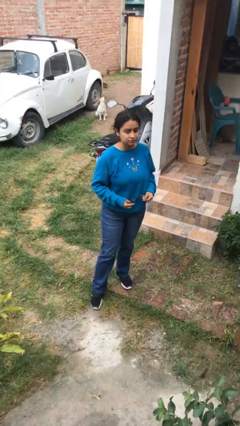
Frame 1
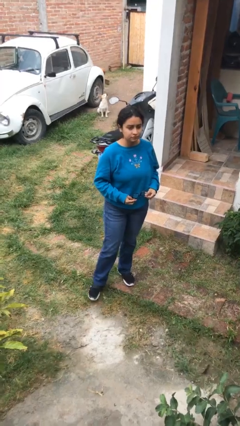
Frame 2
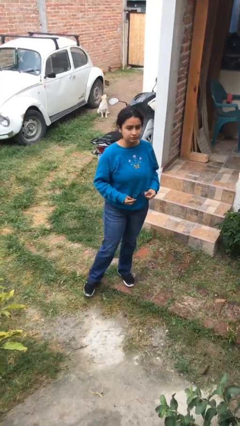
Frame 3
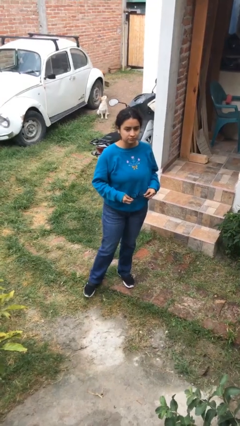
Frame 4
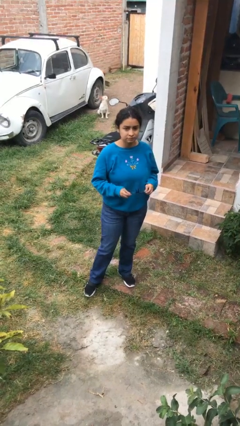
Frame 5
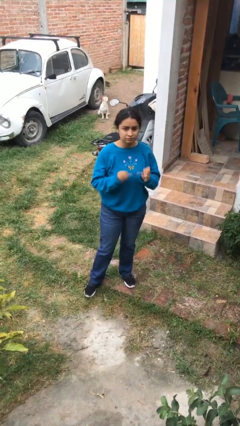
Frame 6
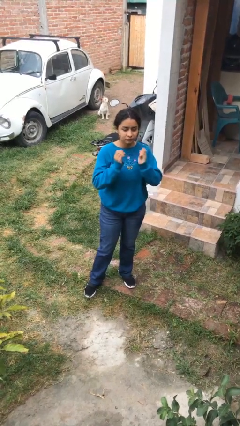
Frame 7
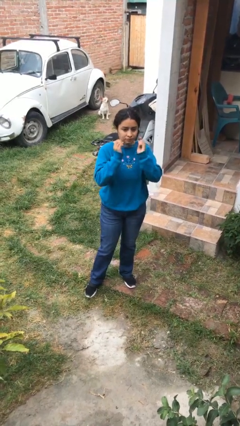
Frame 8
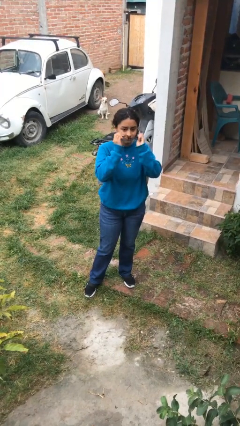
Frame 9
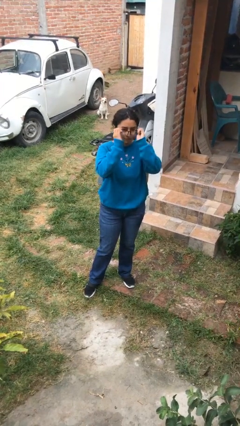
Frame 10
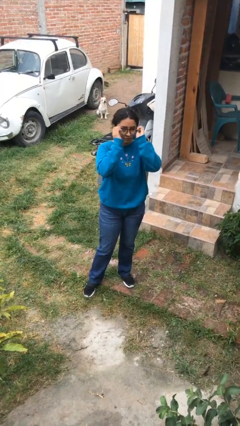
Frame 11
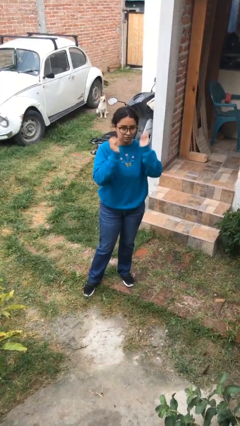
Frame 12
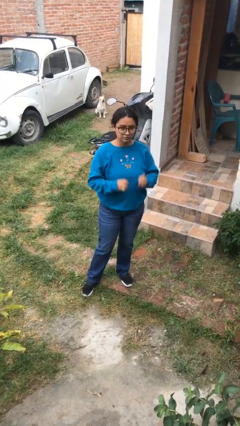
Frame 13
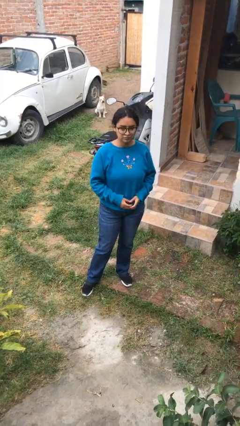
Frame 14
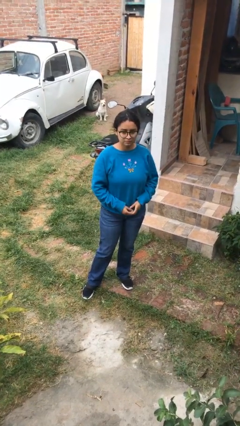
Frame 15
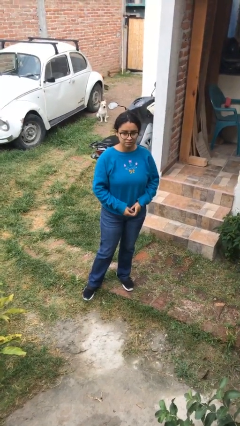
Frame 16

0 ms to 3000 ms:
person puts on glasses

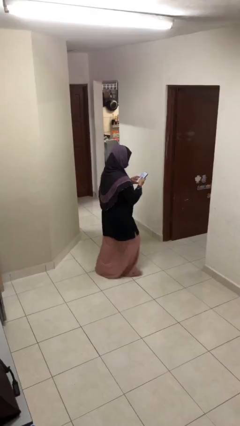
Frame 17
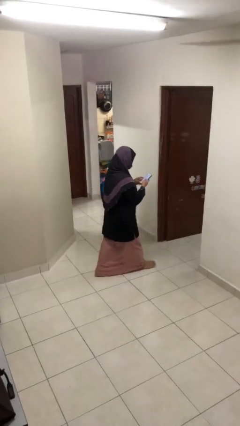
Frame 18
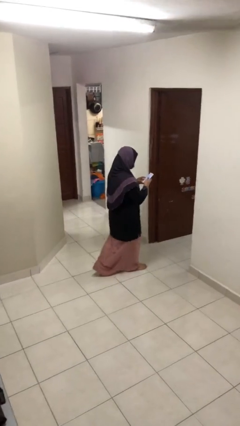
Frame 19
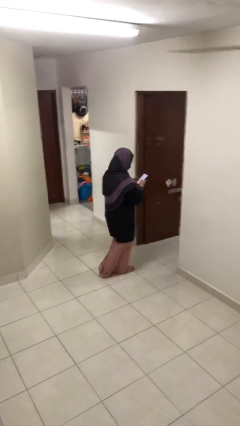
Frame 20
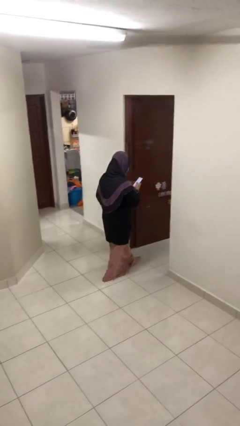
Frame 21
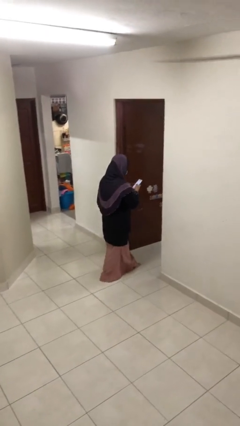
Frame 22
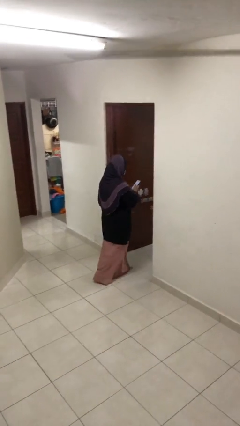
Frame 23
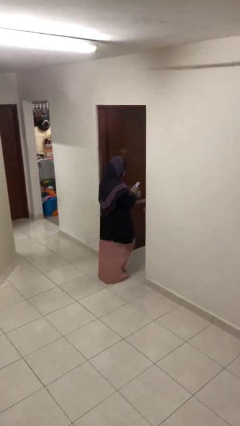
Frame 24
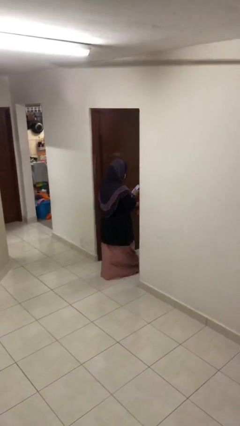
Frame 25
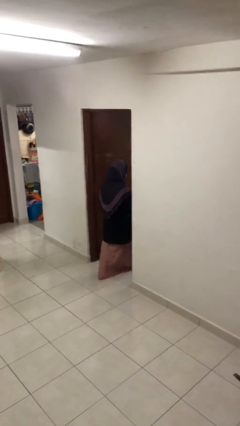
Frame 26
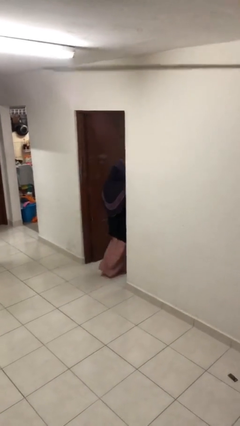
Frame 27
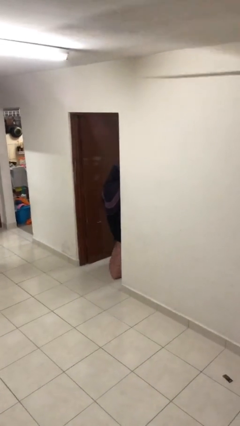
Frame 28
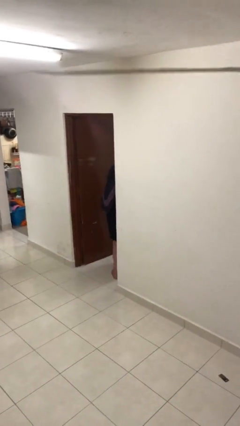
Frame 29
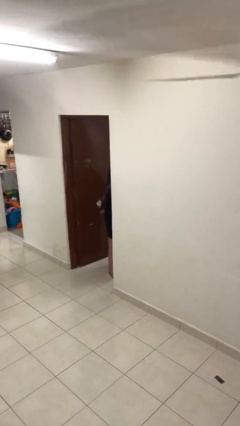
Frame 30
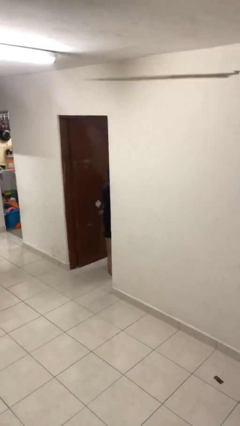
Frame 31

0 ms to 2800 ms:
person enters scene through structure

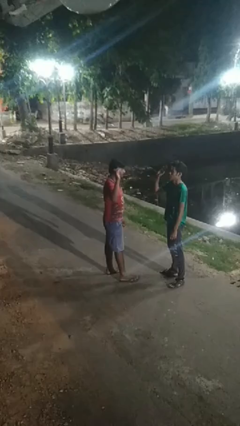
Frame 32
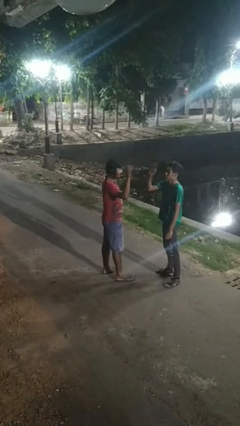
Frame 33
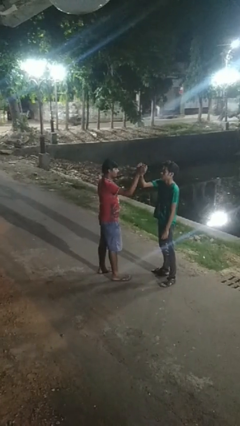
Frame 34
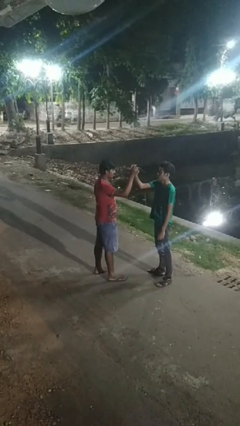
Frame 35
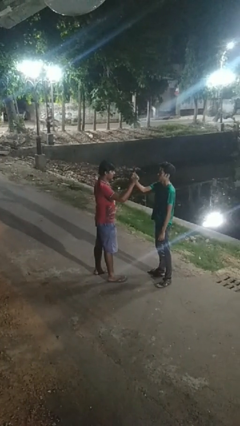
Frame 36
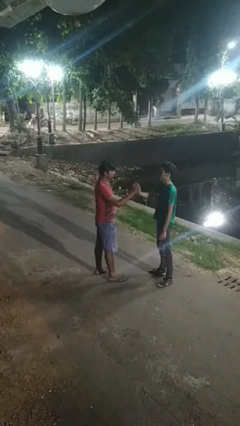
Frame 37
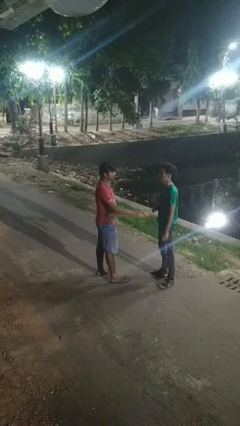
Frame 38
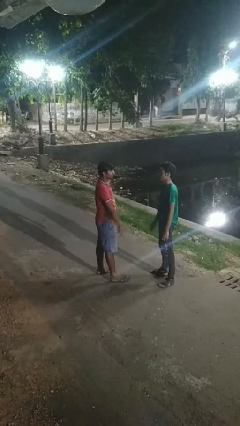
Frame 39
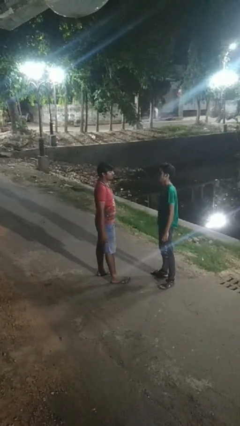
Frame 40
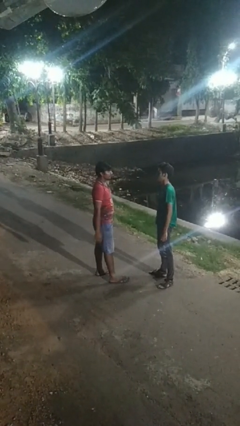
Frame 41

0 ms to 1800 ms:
person highfives hand

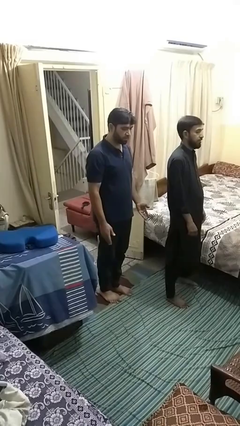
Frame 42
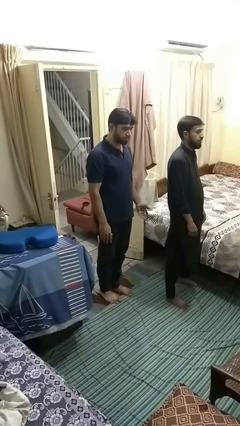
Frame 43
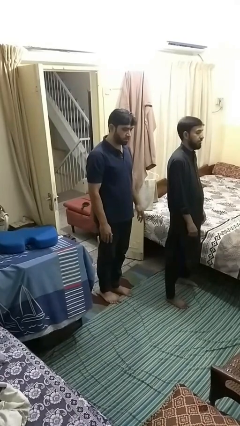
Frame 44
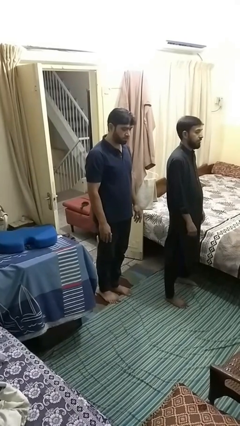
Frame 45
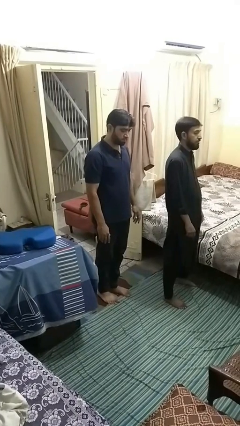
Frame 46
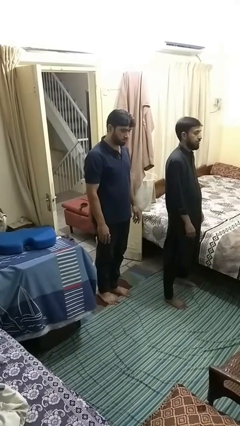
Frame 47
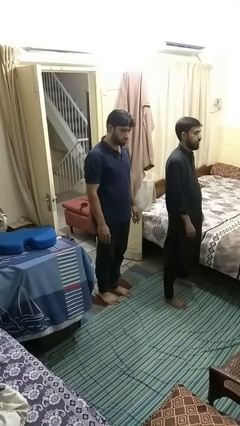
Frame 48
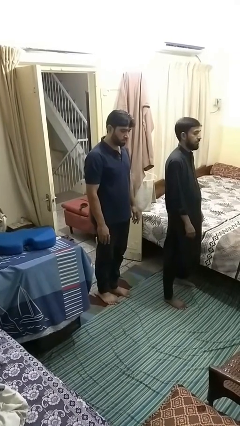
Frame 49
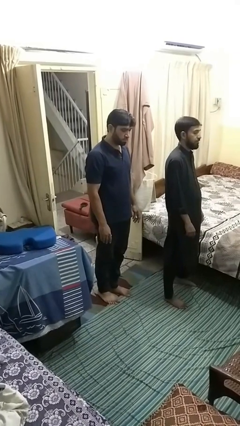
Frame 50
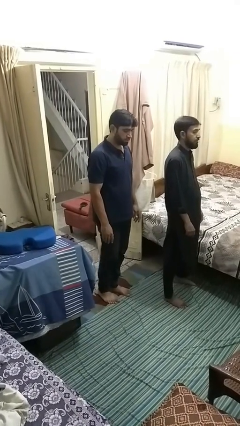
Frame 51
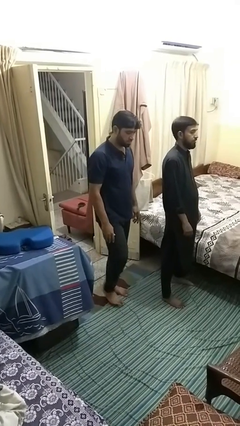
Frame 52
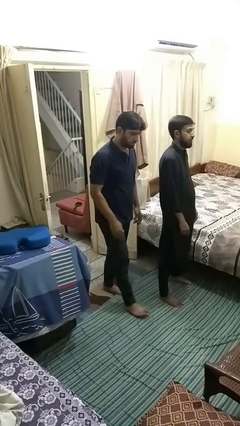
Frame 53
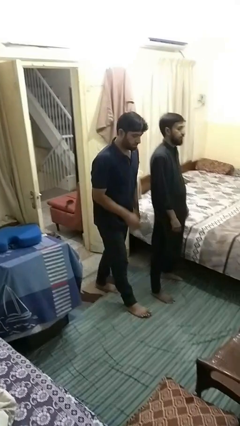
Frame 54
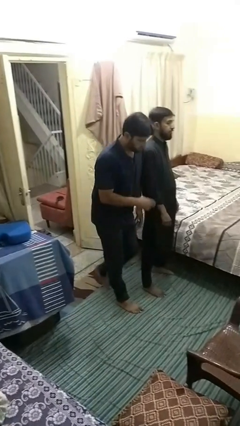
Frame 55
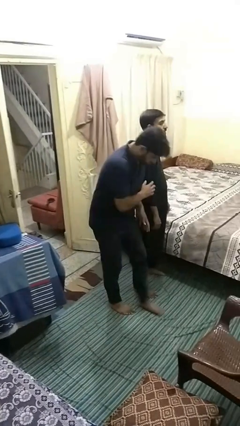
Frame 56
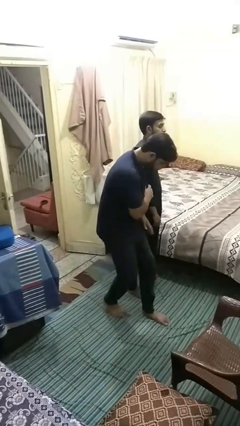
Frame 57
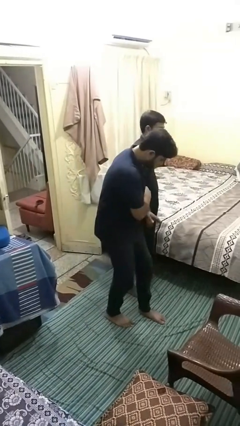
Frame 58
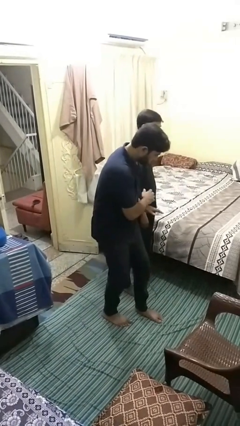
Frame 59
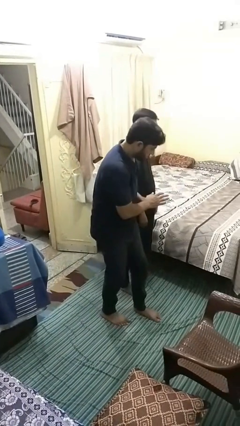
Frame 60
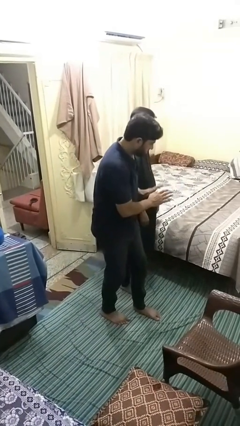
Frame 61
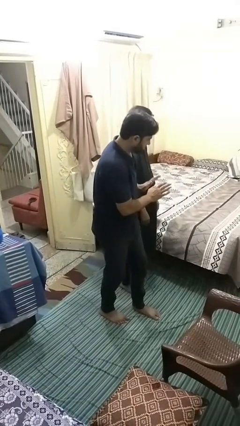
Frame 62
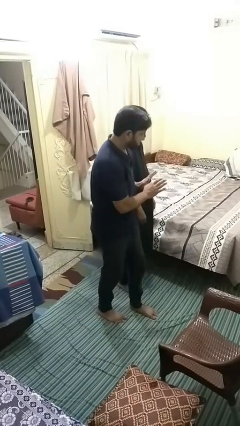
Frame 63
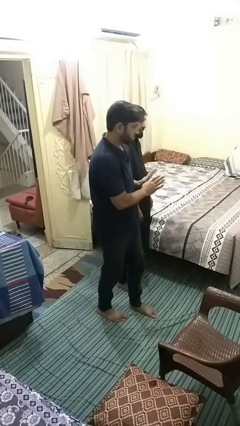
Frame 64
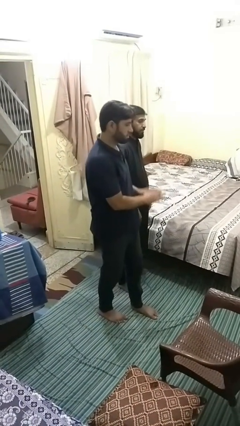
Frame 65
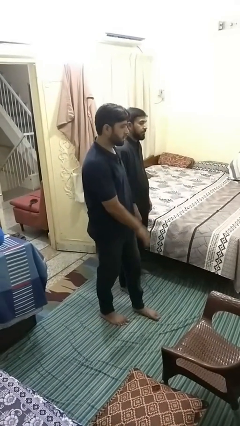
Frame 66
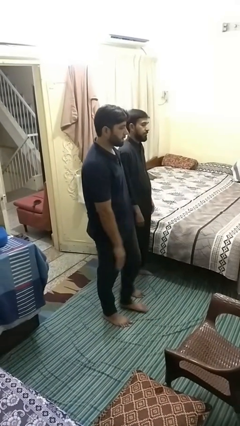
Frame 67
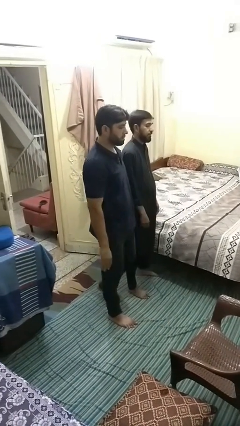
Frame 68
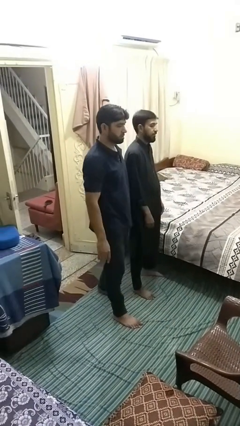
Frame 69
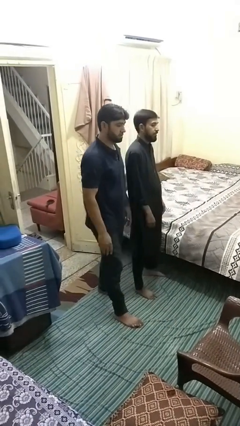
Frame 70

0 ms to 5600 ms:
person bumps into person

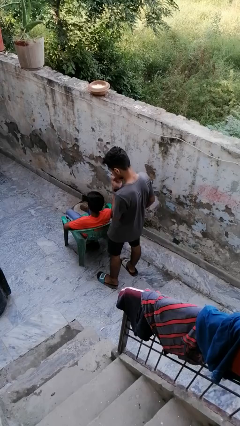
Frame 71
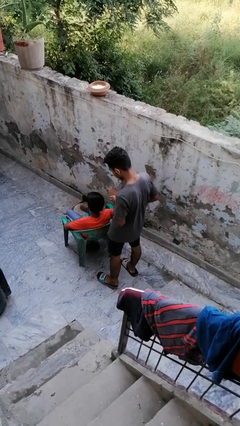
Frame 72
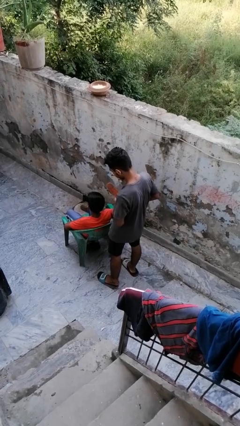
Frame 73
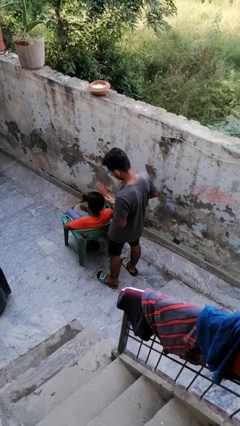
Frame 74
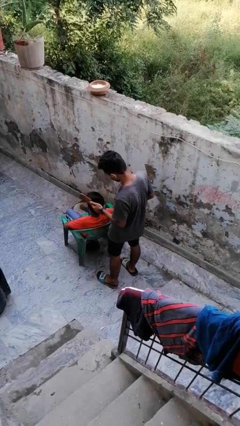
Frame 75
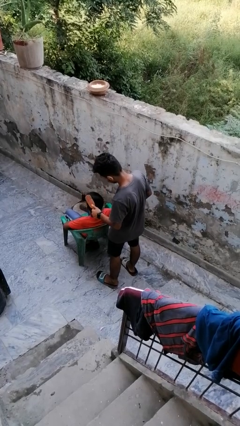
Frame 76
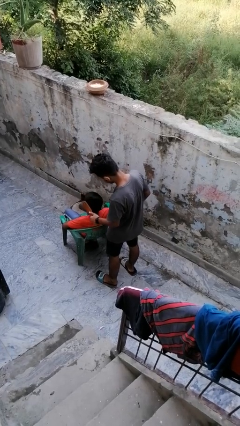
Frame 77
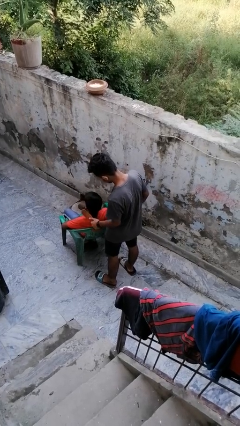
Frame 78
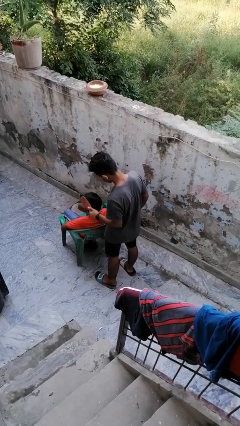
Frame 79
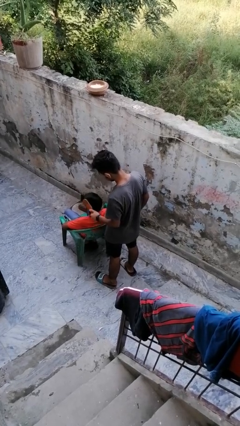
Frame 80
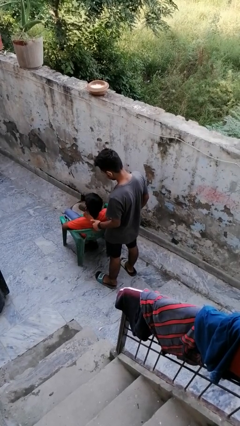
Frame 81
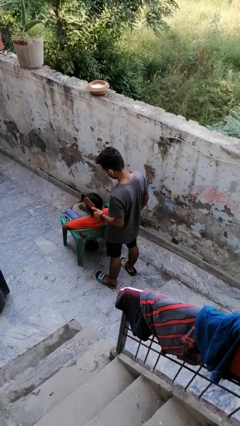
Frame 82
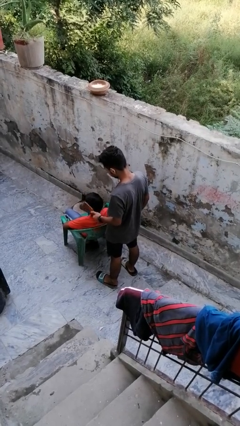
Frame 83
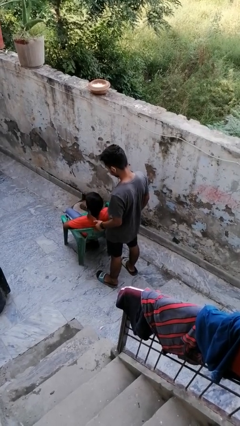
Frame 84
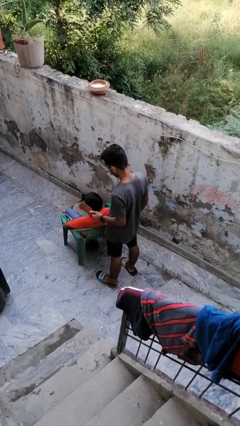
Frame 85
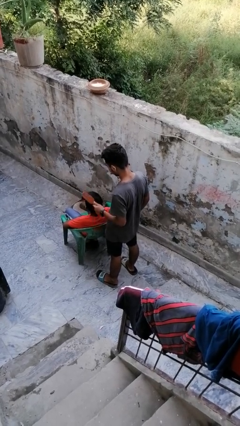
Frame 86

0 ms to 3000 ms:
person brushes hair of person

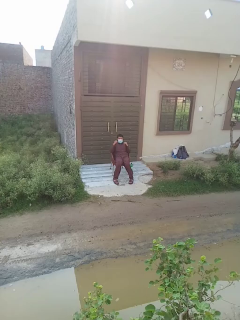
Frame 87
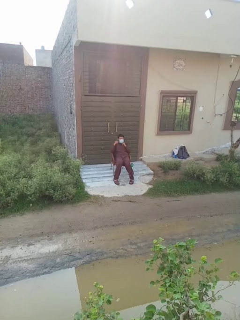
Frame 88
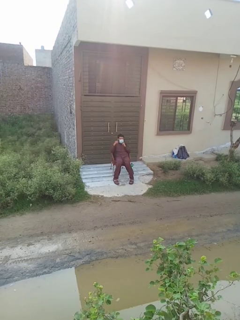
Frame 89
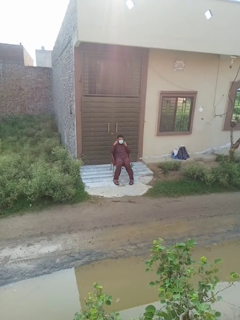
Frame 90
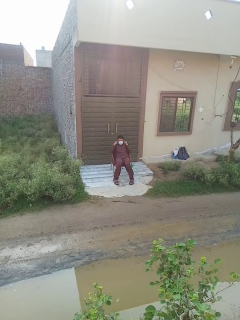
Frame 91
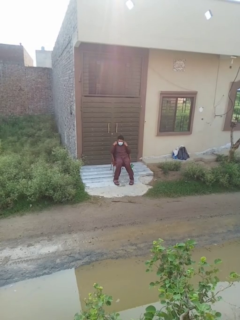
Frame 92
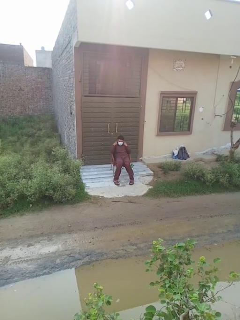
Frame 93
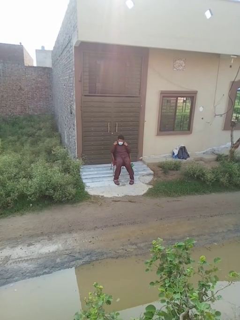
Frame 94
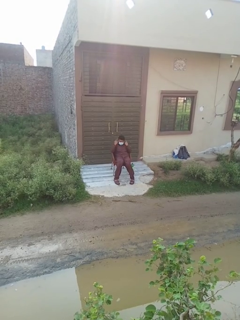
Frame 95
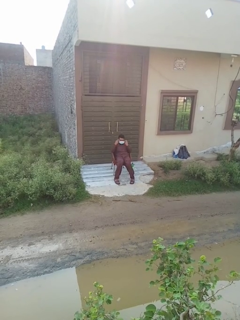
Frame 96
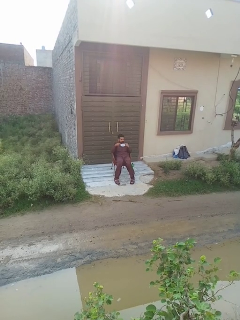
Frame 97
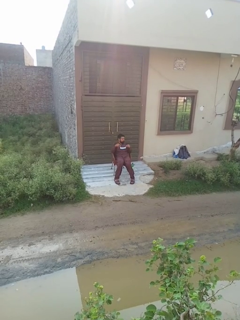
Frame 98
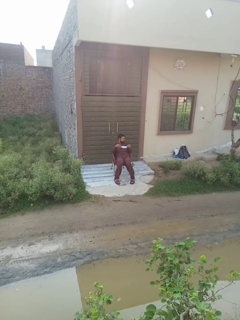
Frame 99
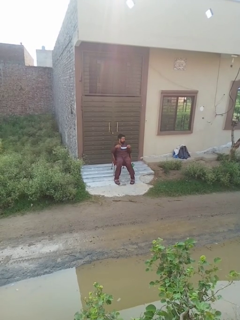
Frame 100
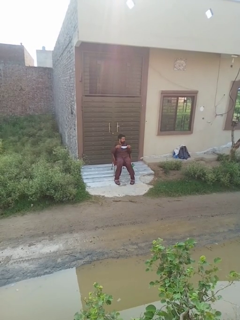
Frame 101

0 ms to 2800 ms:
person takes off facemask
